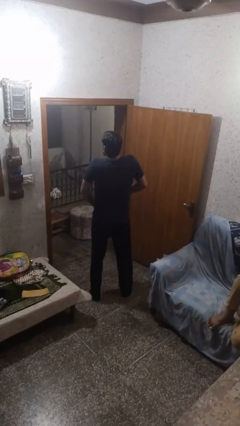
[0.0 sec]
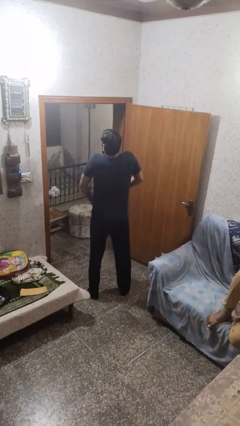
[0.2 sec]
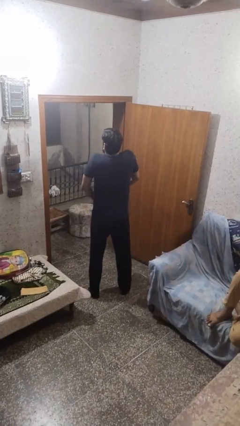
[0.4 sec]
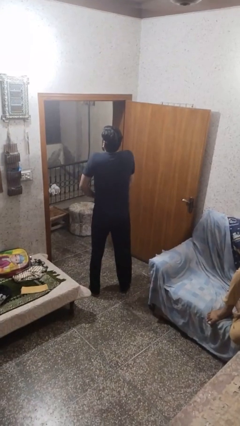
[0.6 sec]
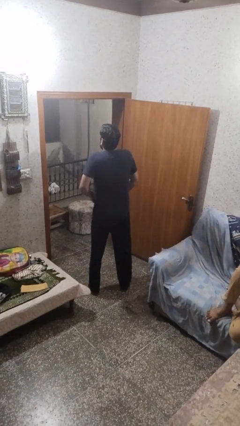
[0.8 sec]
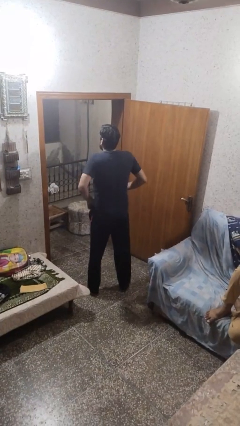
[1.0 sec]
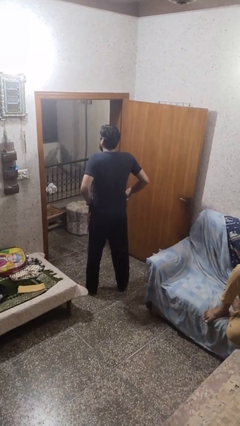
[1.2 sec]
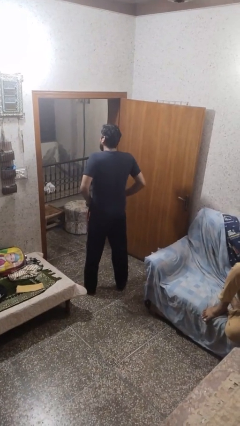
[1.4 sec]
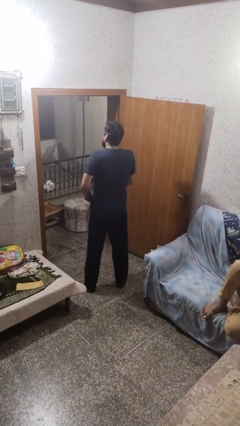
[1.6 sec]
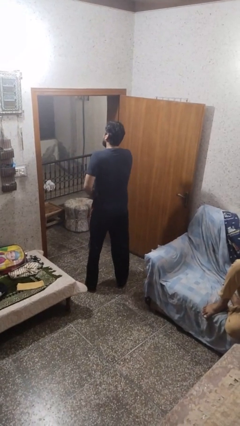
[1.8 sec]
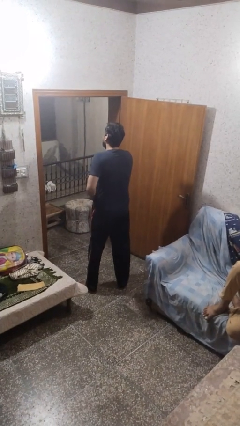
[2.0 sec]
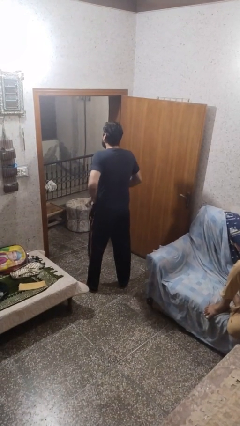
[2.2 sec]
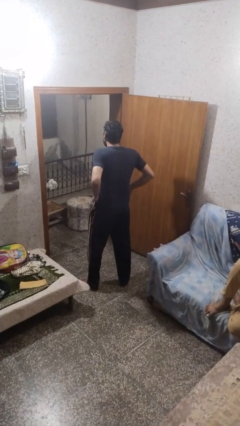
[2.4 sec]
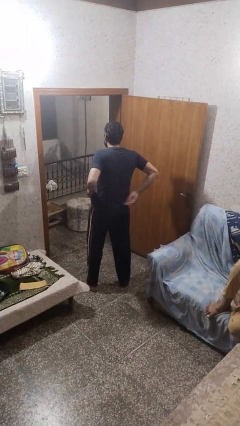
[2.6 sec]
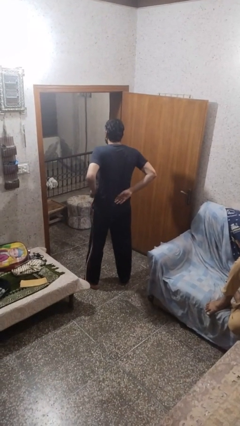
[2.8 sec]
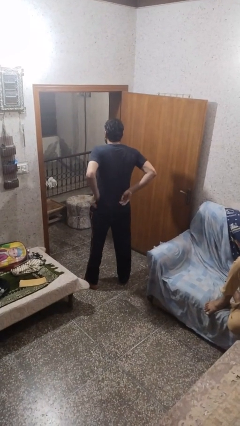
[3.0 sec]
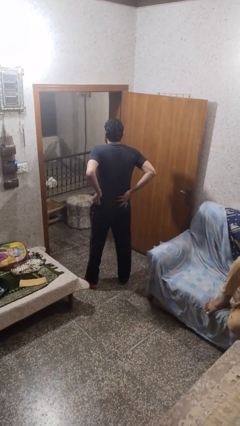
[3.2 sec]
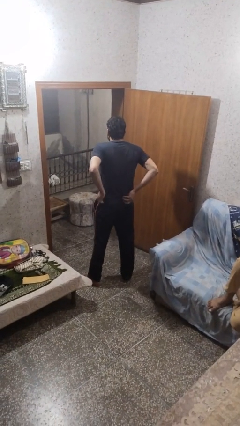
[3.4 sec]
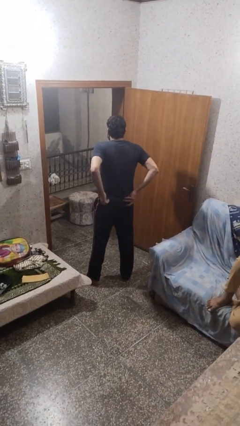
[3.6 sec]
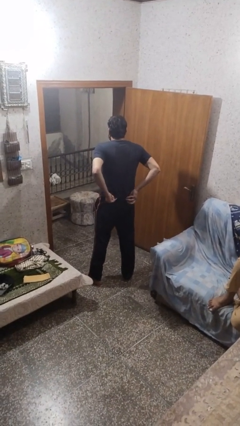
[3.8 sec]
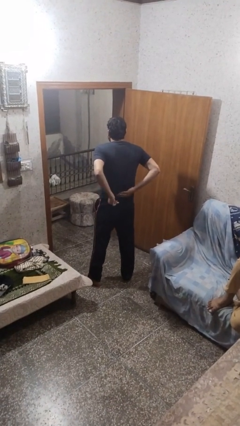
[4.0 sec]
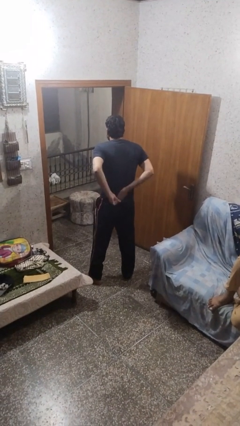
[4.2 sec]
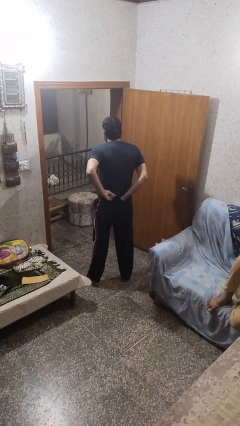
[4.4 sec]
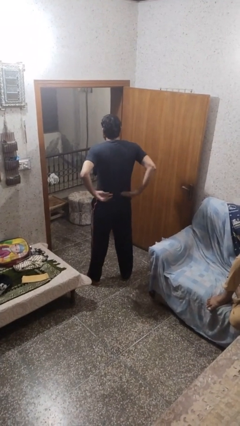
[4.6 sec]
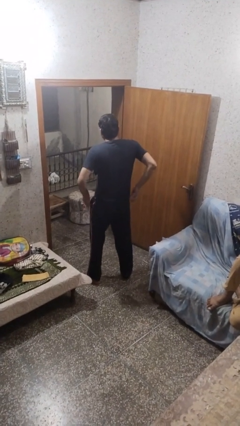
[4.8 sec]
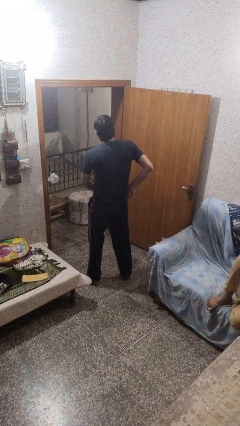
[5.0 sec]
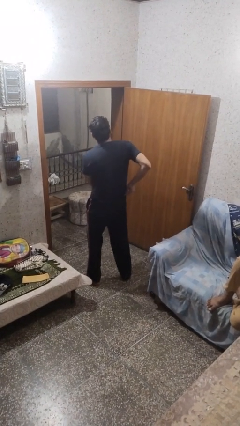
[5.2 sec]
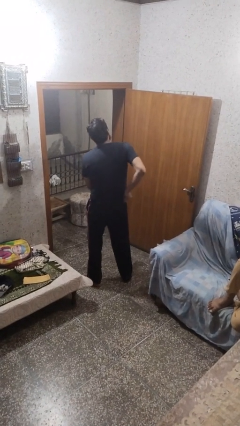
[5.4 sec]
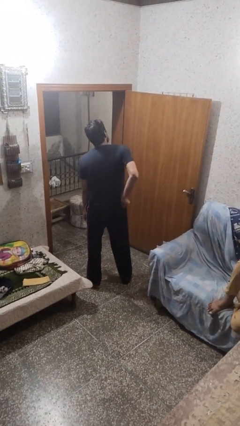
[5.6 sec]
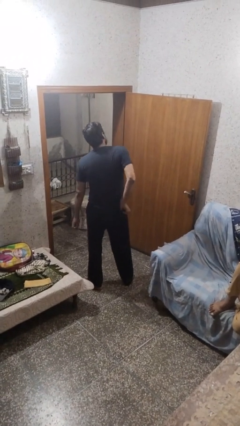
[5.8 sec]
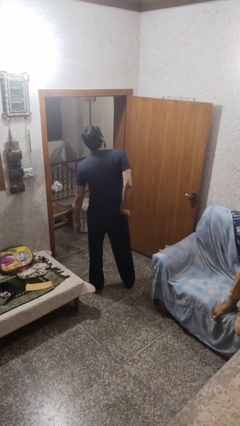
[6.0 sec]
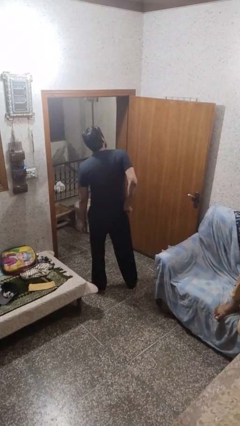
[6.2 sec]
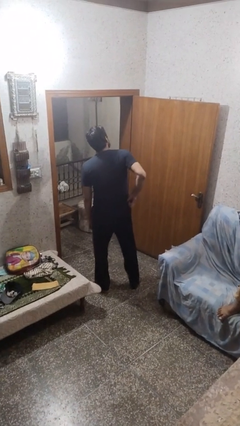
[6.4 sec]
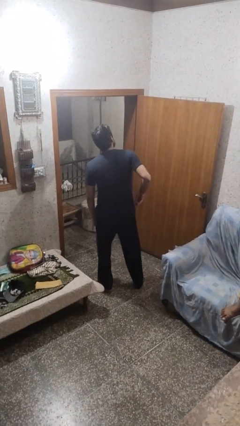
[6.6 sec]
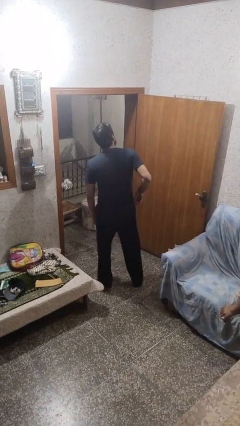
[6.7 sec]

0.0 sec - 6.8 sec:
person tucks in shirt

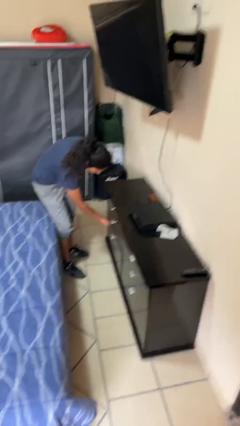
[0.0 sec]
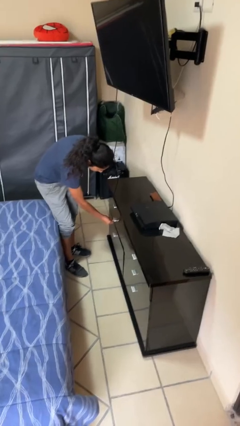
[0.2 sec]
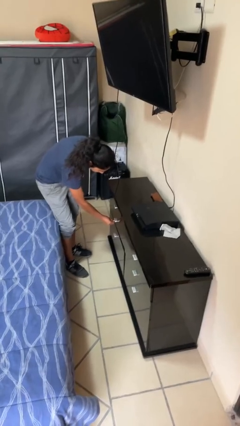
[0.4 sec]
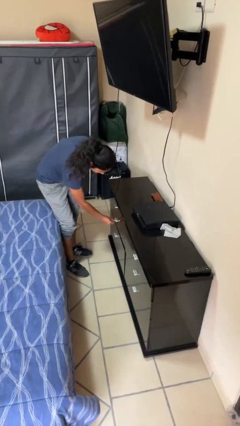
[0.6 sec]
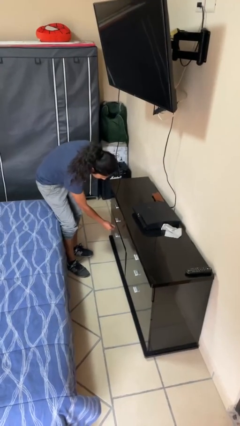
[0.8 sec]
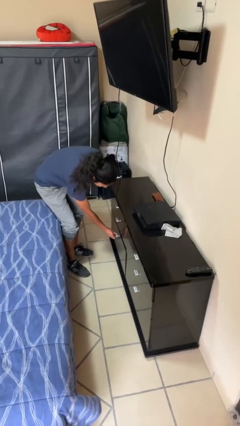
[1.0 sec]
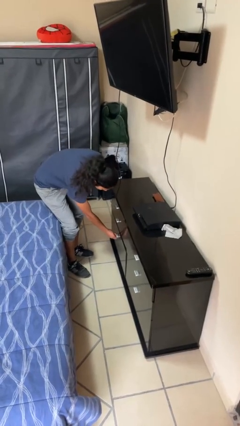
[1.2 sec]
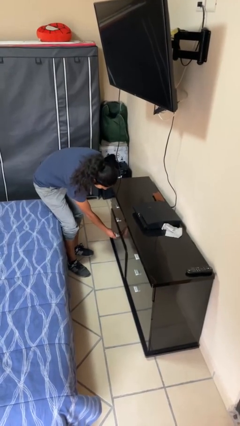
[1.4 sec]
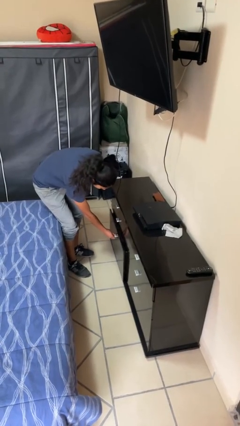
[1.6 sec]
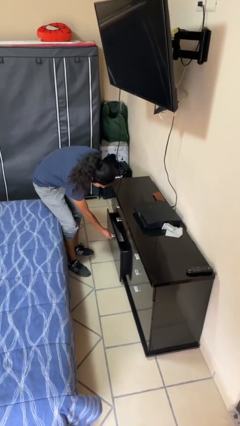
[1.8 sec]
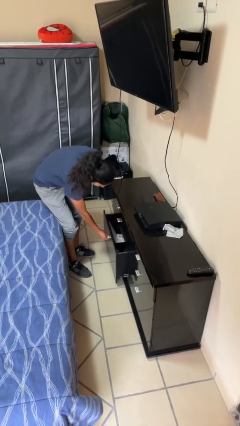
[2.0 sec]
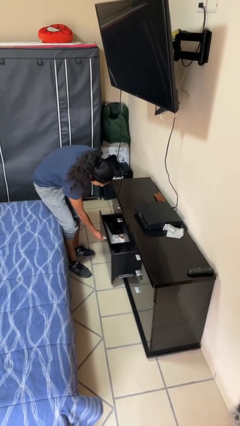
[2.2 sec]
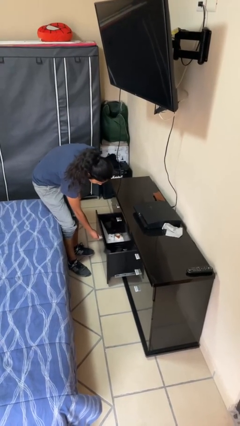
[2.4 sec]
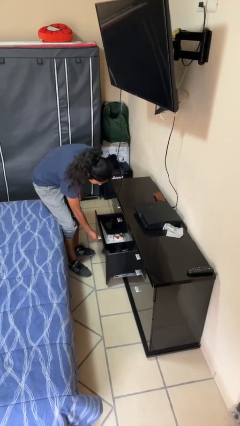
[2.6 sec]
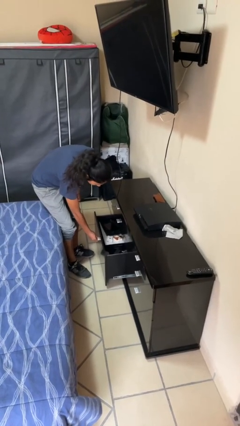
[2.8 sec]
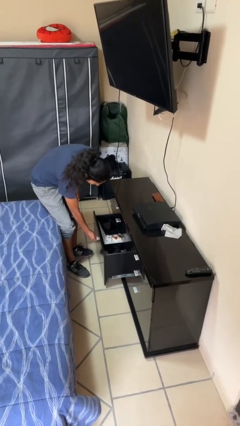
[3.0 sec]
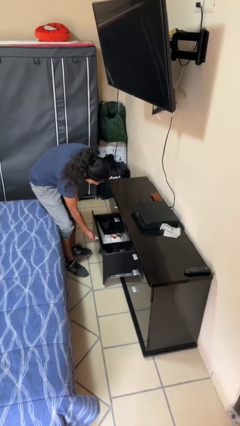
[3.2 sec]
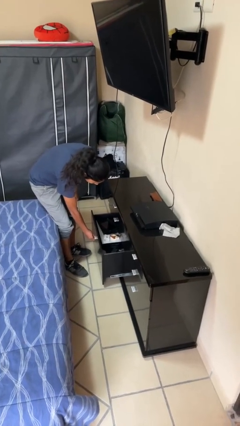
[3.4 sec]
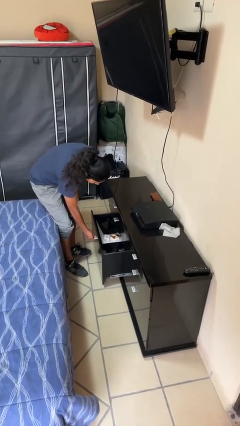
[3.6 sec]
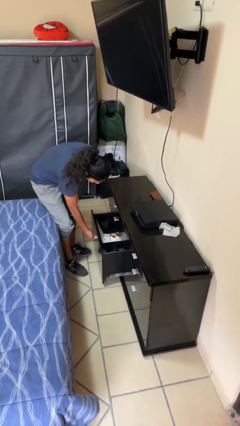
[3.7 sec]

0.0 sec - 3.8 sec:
person opens dresser drawer

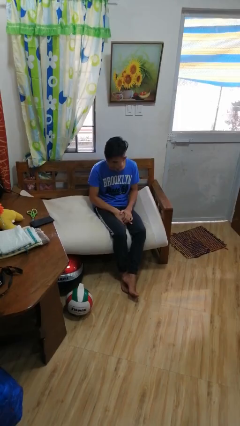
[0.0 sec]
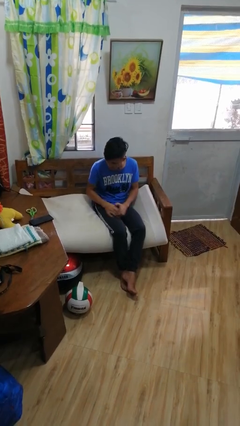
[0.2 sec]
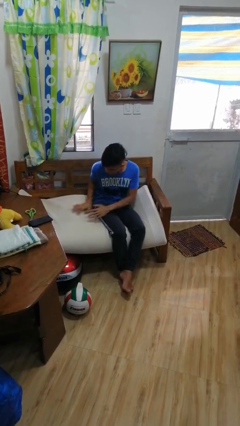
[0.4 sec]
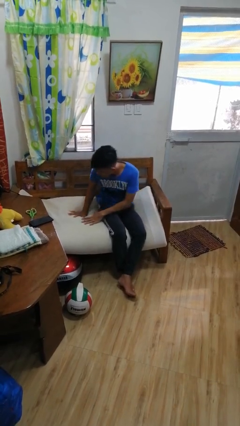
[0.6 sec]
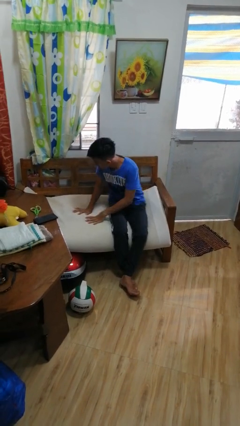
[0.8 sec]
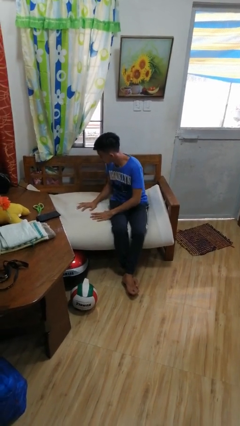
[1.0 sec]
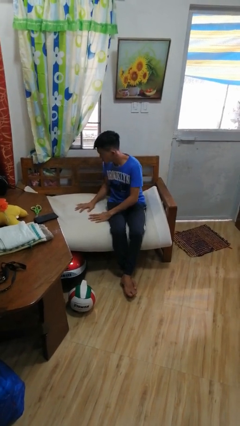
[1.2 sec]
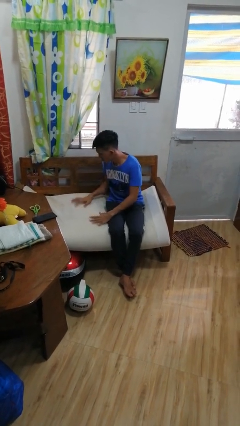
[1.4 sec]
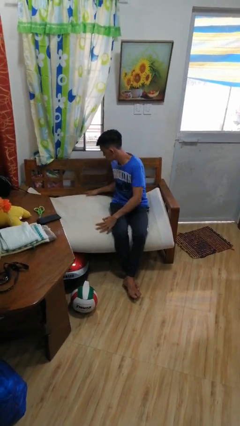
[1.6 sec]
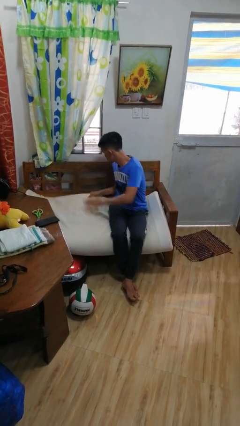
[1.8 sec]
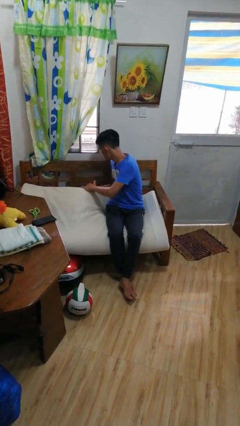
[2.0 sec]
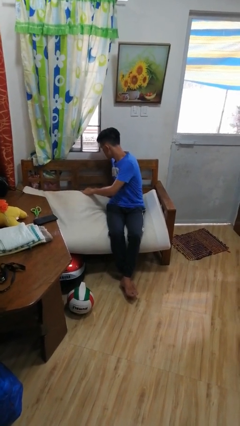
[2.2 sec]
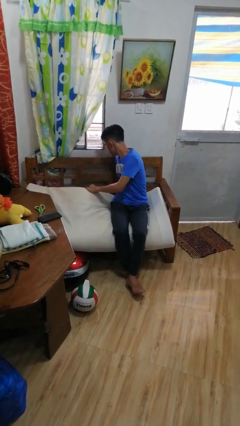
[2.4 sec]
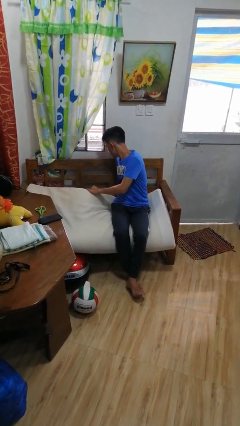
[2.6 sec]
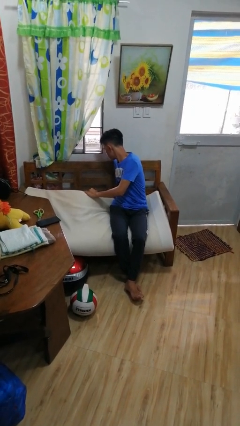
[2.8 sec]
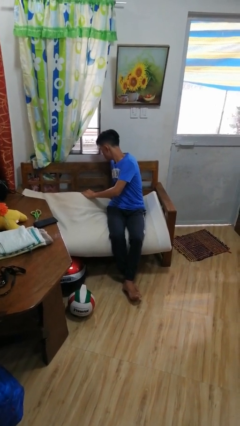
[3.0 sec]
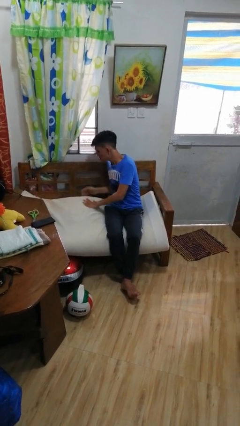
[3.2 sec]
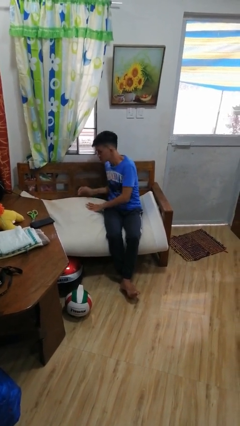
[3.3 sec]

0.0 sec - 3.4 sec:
person searches in couch

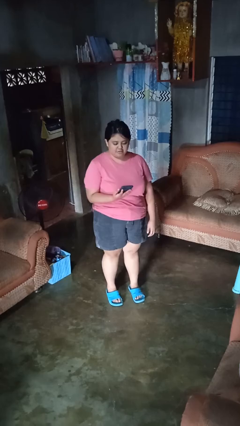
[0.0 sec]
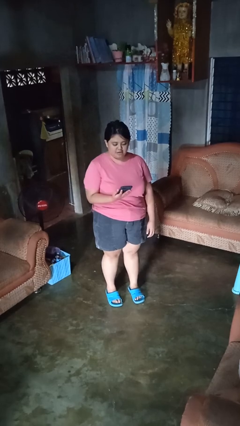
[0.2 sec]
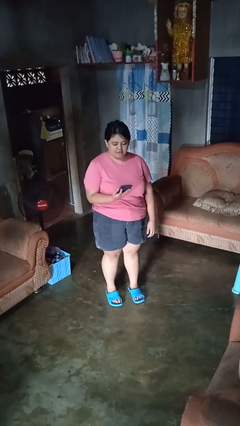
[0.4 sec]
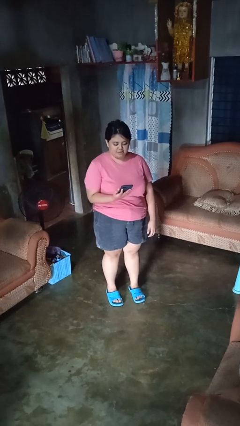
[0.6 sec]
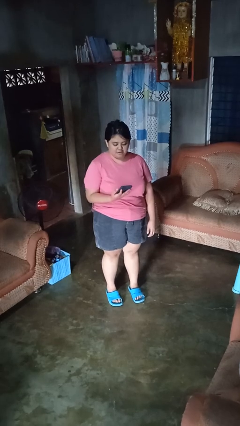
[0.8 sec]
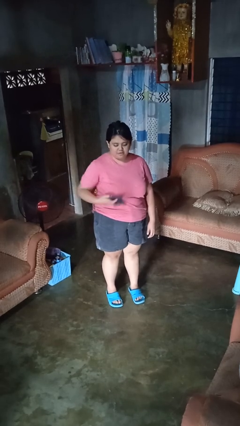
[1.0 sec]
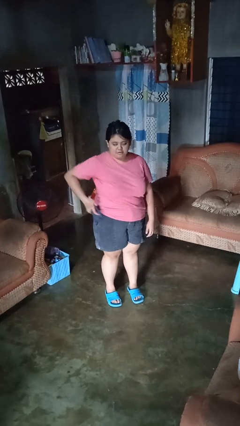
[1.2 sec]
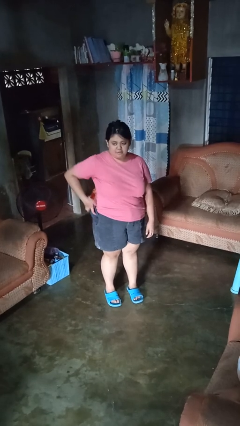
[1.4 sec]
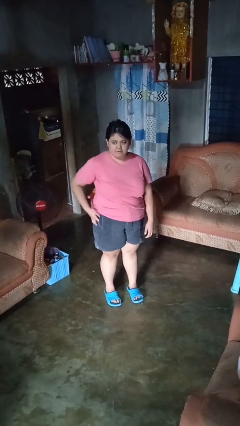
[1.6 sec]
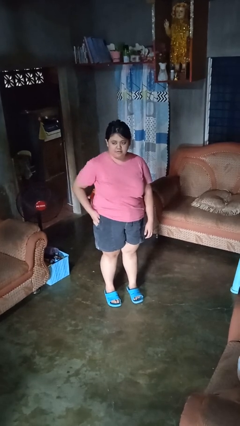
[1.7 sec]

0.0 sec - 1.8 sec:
person puts phone into pocket

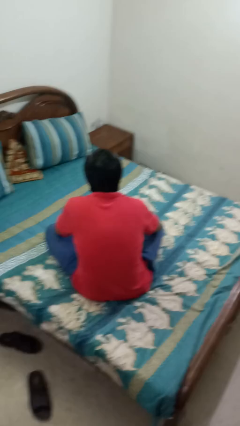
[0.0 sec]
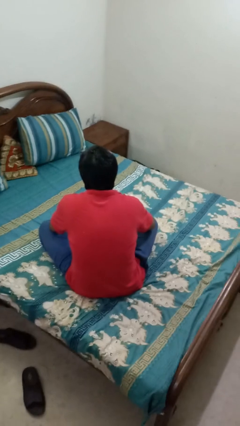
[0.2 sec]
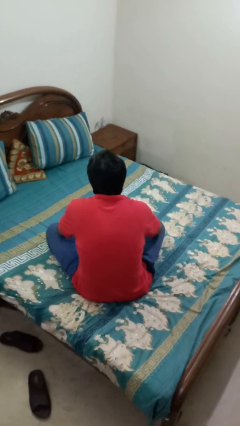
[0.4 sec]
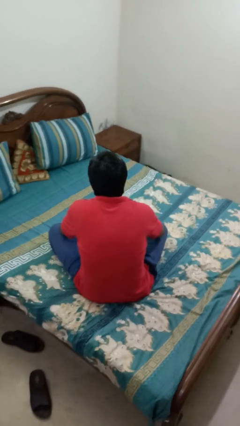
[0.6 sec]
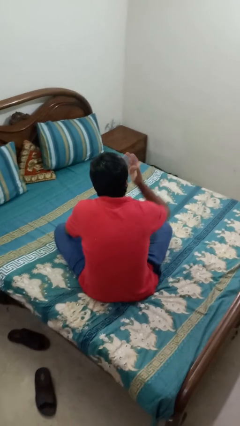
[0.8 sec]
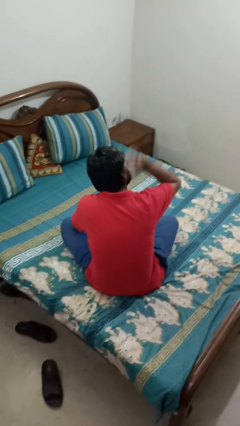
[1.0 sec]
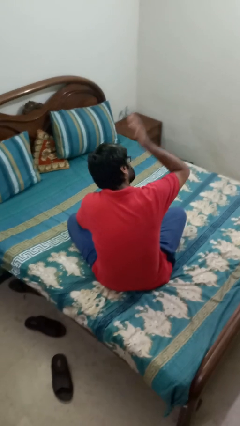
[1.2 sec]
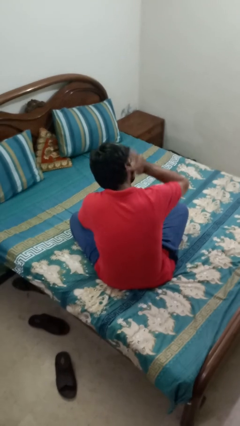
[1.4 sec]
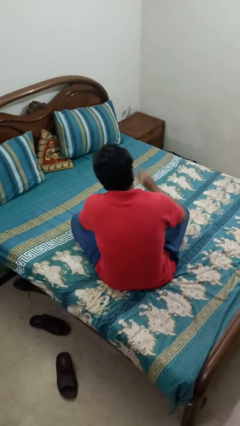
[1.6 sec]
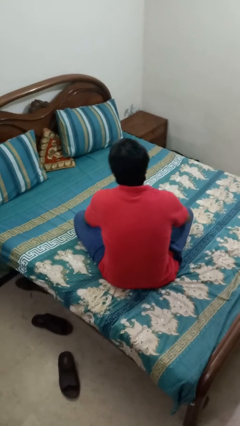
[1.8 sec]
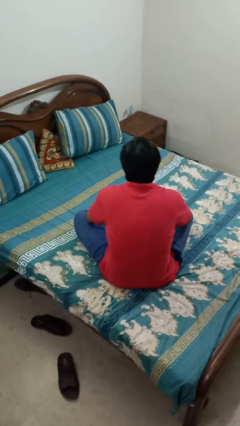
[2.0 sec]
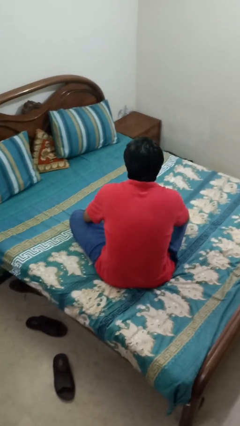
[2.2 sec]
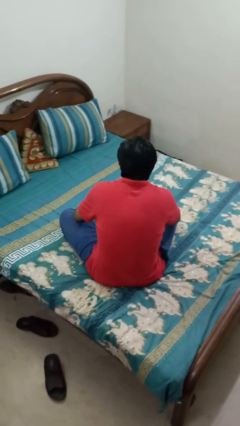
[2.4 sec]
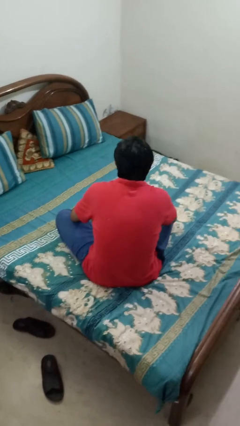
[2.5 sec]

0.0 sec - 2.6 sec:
person swats bug
